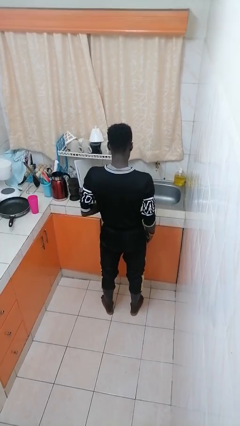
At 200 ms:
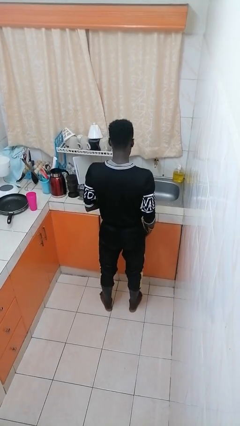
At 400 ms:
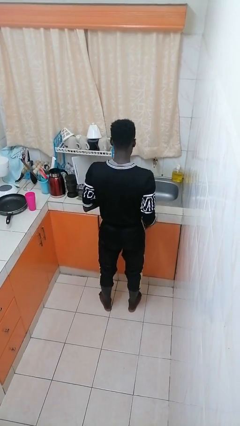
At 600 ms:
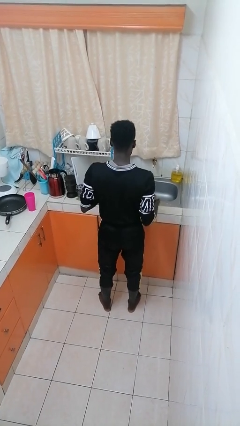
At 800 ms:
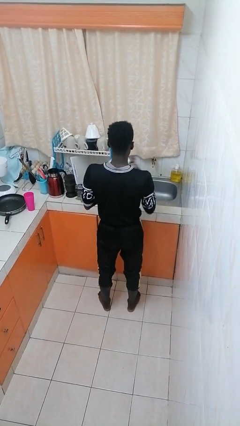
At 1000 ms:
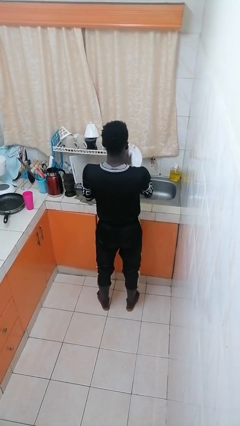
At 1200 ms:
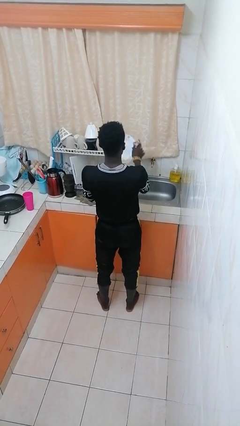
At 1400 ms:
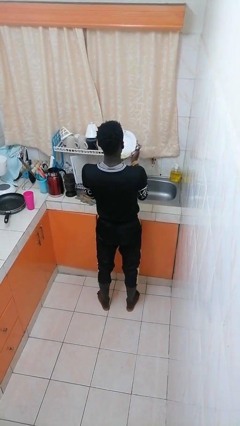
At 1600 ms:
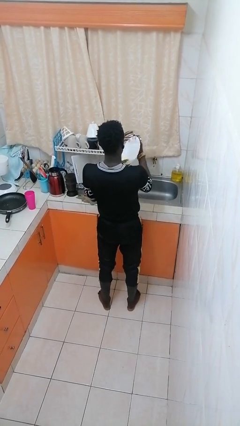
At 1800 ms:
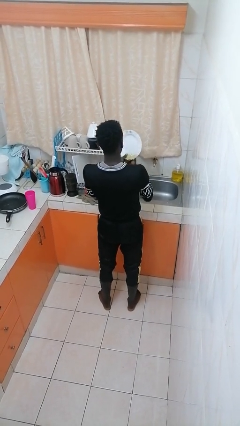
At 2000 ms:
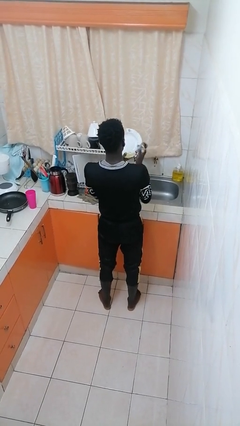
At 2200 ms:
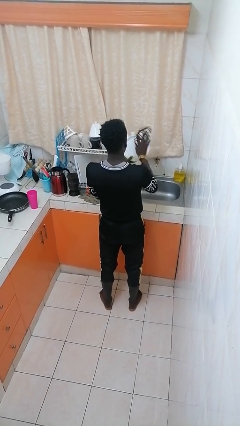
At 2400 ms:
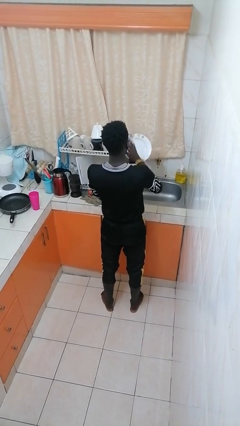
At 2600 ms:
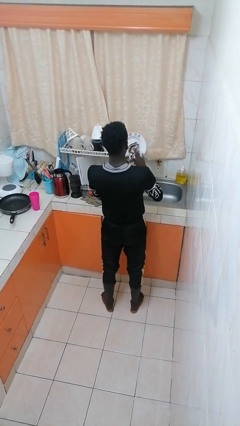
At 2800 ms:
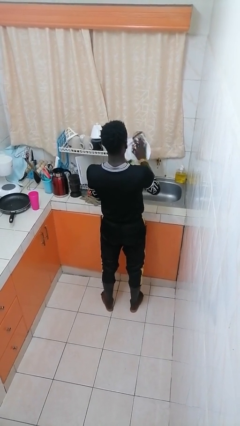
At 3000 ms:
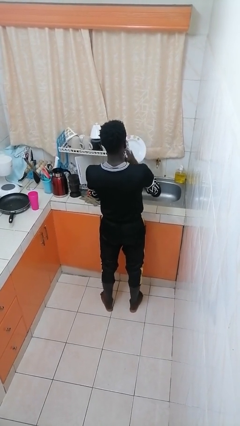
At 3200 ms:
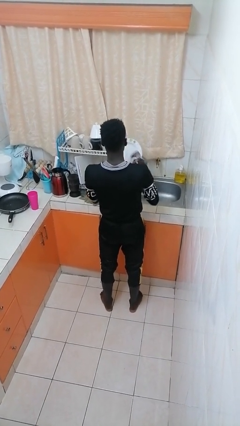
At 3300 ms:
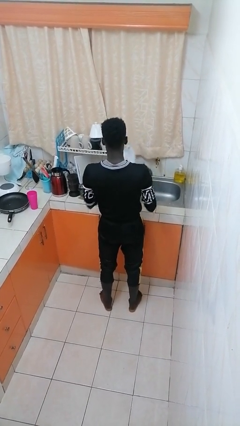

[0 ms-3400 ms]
person dries dish

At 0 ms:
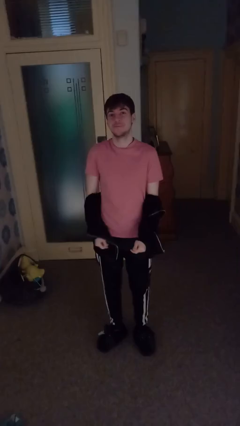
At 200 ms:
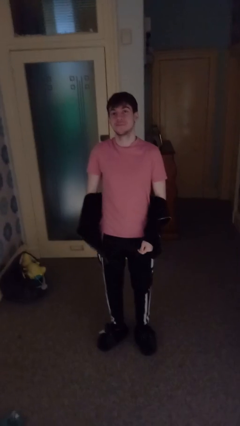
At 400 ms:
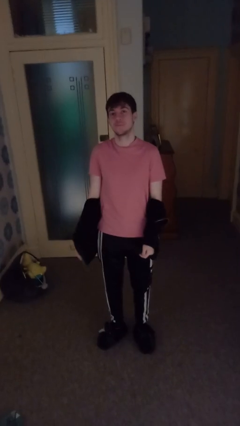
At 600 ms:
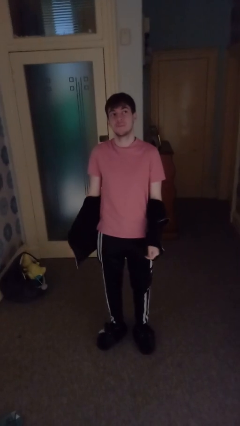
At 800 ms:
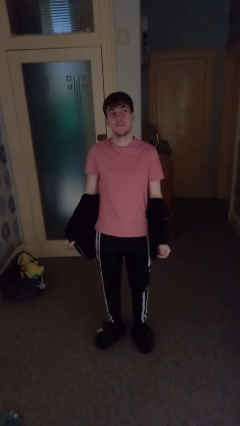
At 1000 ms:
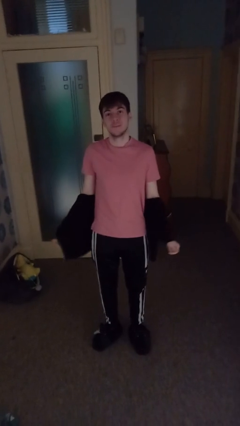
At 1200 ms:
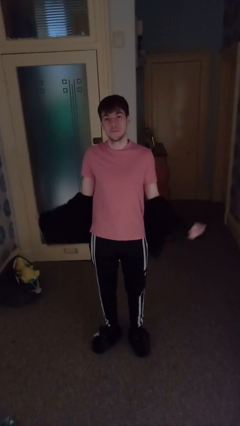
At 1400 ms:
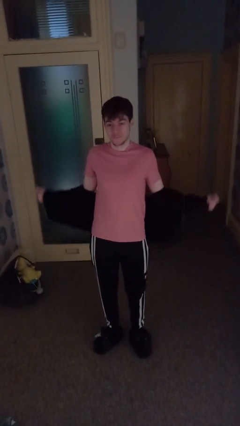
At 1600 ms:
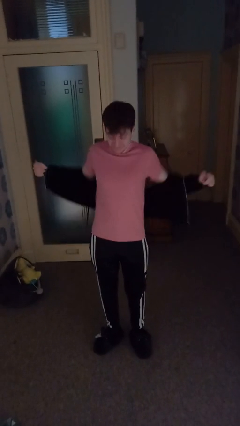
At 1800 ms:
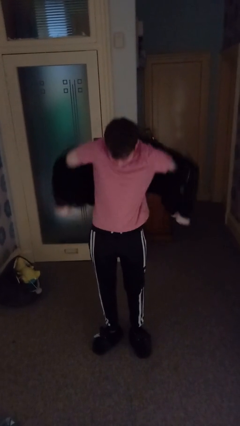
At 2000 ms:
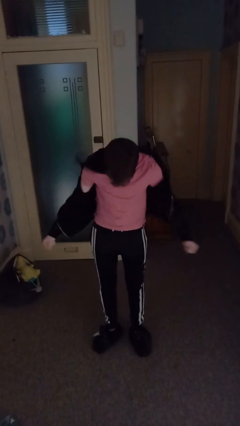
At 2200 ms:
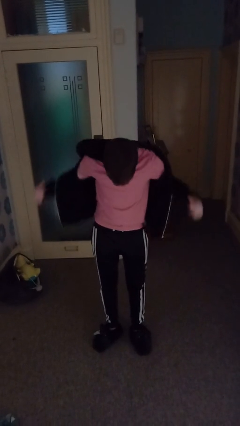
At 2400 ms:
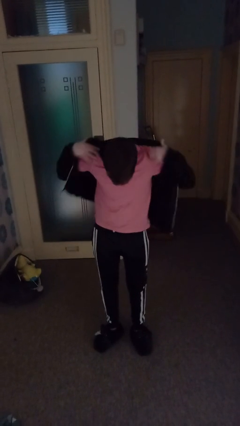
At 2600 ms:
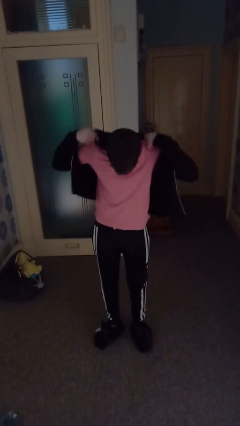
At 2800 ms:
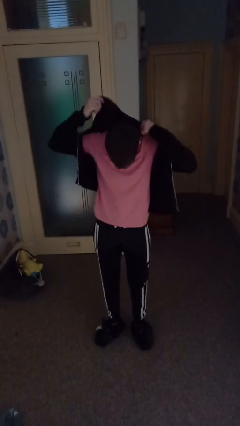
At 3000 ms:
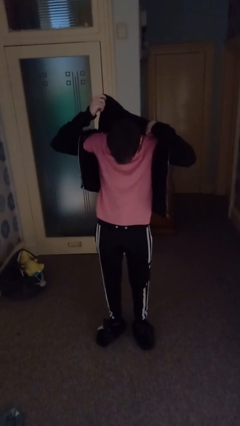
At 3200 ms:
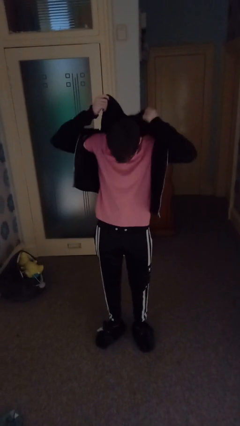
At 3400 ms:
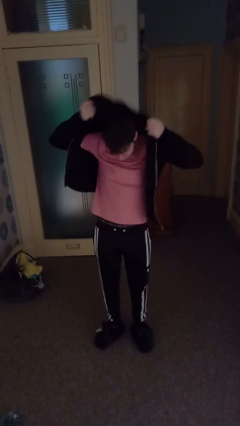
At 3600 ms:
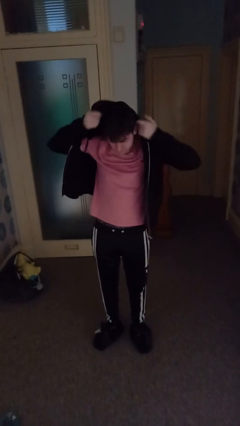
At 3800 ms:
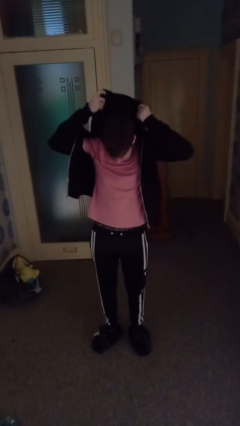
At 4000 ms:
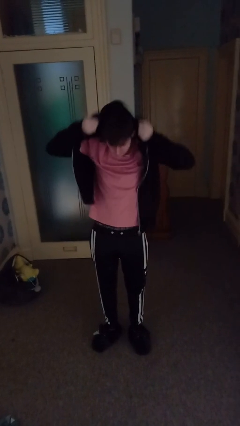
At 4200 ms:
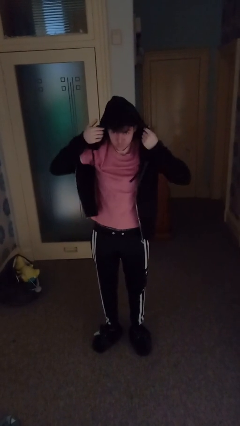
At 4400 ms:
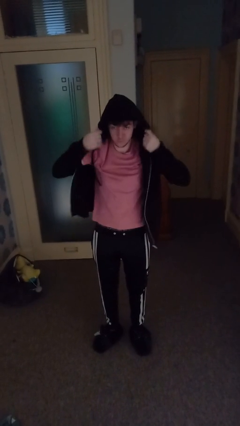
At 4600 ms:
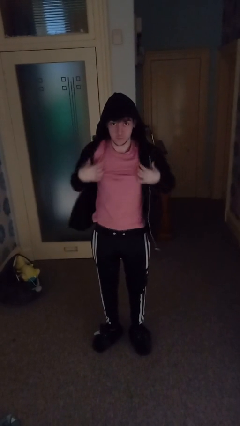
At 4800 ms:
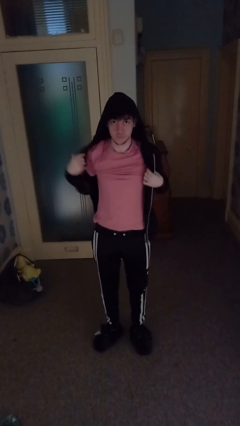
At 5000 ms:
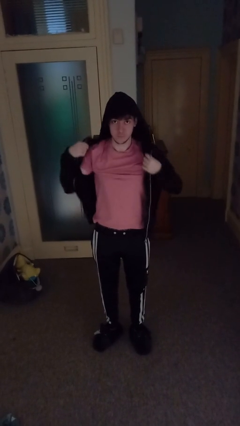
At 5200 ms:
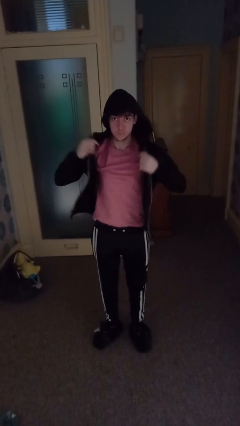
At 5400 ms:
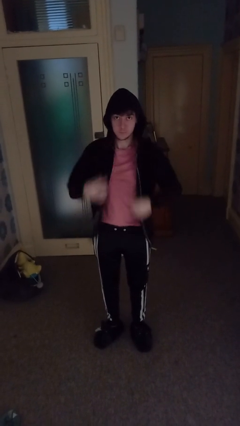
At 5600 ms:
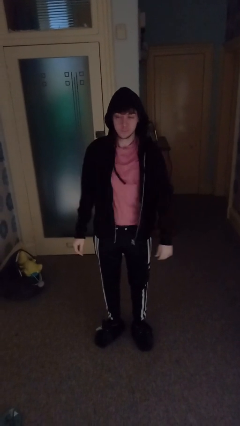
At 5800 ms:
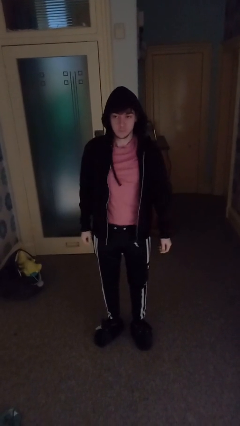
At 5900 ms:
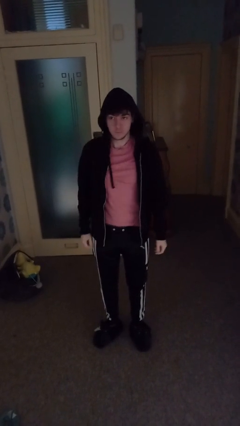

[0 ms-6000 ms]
person puts on hoodie

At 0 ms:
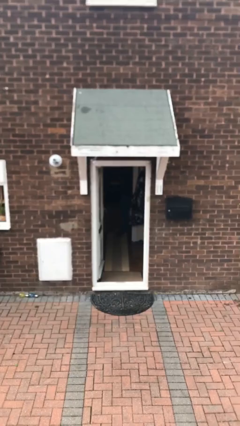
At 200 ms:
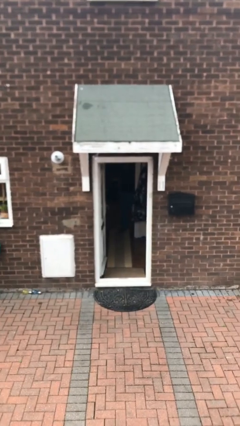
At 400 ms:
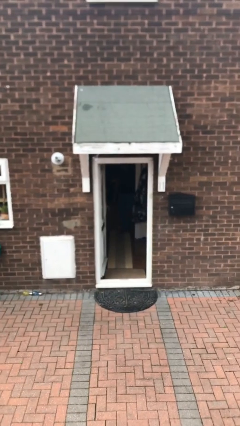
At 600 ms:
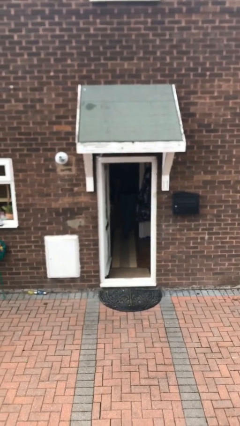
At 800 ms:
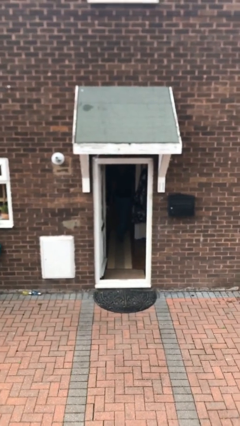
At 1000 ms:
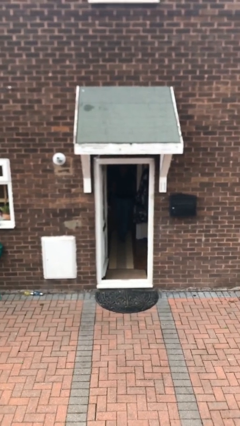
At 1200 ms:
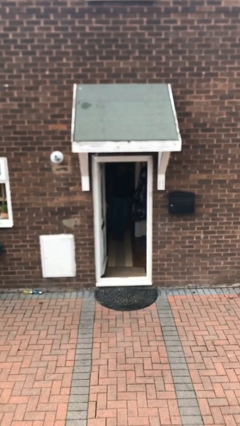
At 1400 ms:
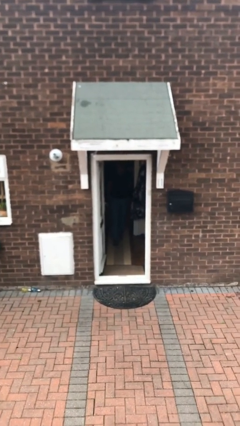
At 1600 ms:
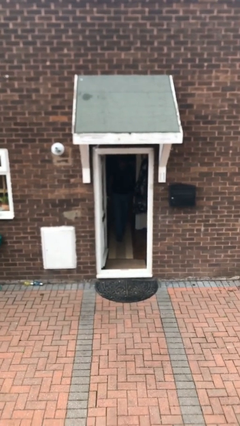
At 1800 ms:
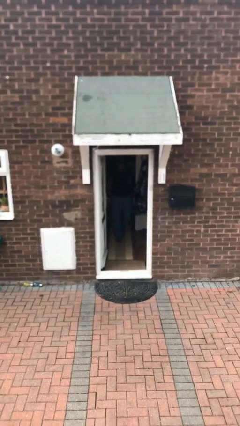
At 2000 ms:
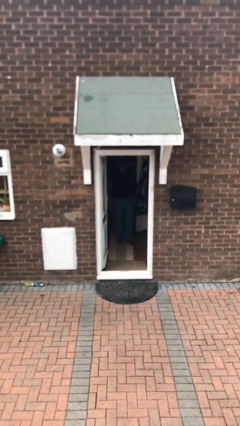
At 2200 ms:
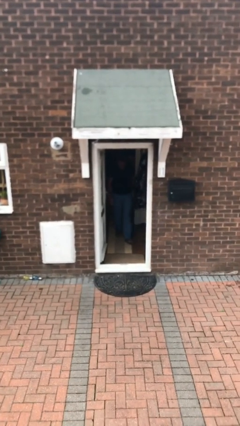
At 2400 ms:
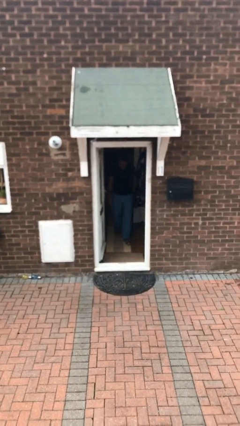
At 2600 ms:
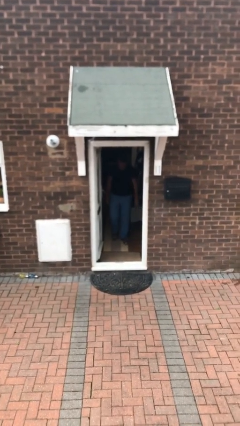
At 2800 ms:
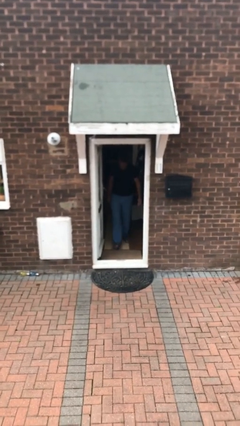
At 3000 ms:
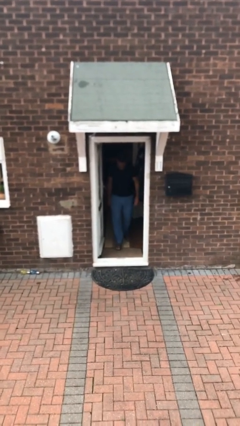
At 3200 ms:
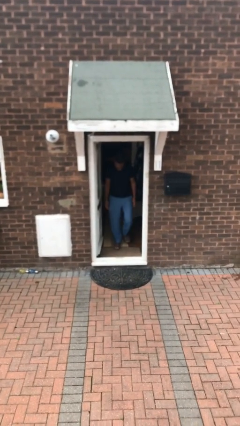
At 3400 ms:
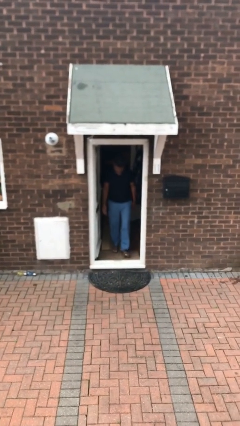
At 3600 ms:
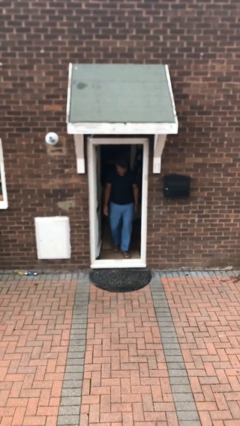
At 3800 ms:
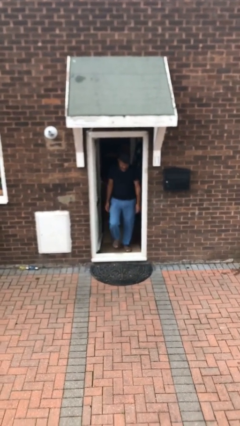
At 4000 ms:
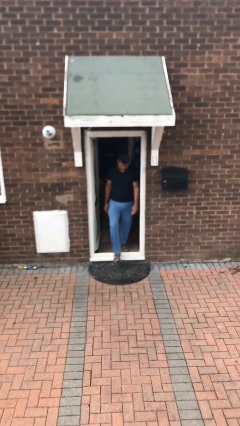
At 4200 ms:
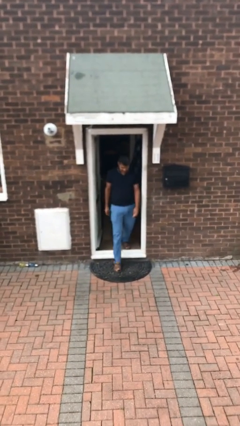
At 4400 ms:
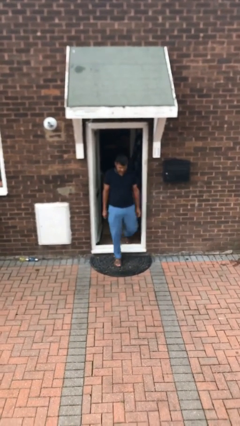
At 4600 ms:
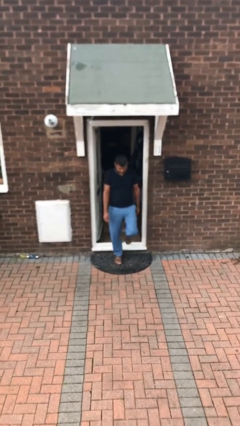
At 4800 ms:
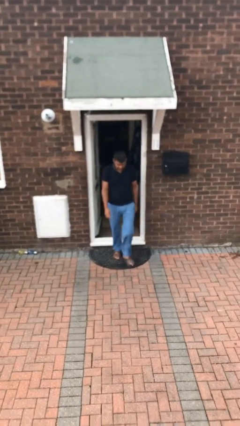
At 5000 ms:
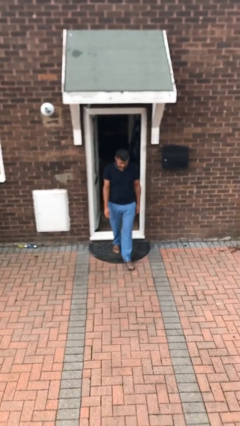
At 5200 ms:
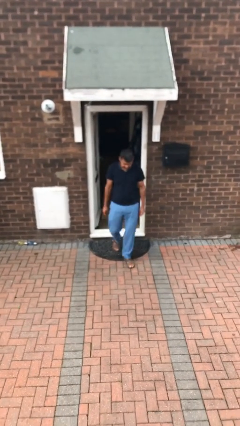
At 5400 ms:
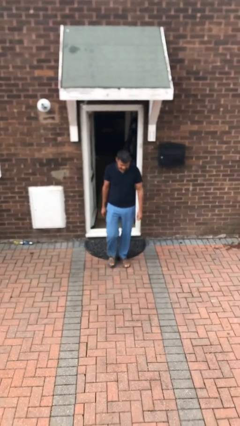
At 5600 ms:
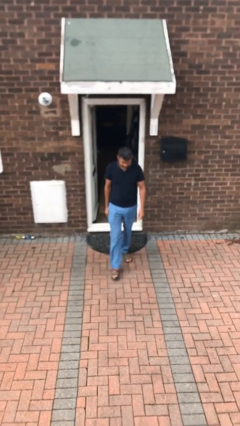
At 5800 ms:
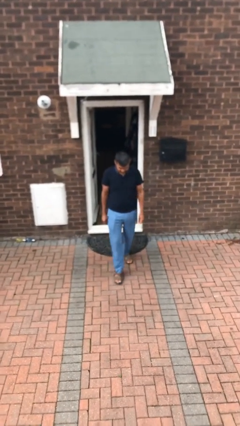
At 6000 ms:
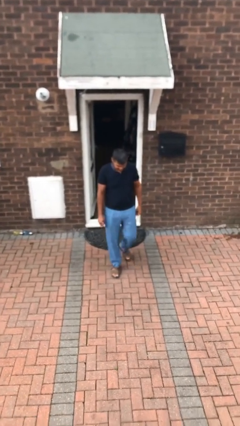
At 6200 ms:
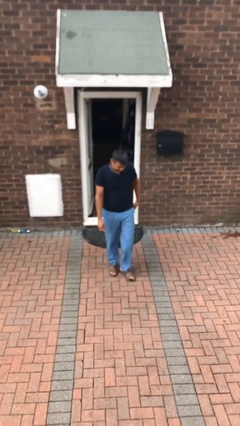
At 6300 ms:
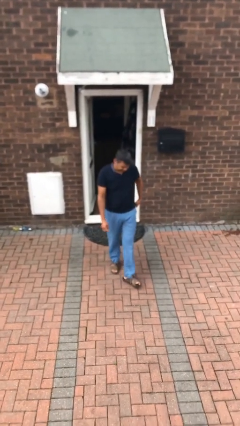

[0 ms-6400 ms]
person enters scene through structure

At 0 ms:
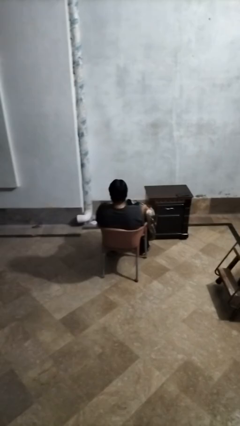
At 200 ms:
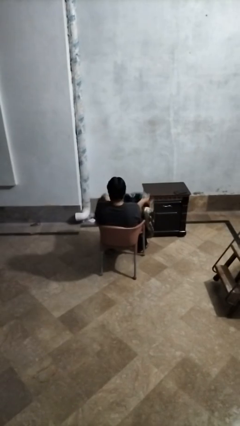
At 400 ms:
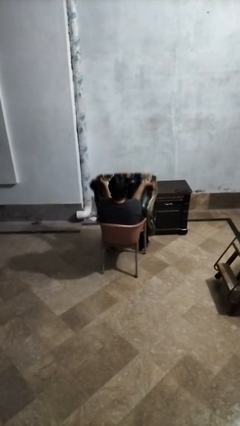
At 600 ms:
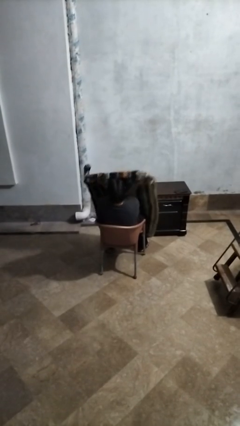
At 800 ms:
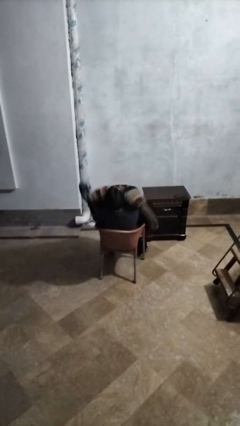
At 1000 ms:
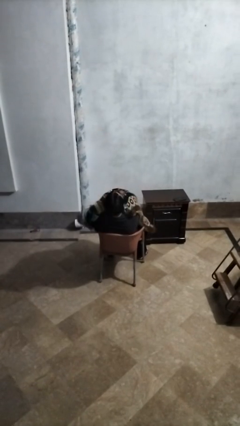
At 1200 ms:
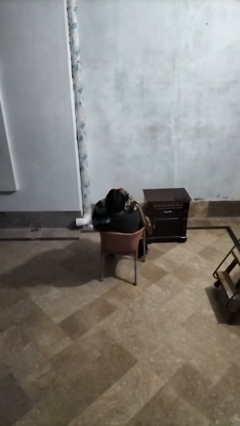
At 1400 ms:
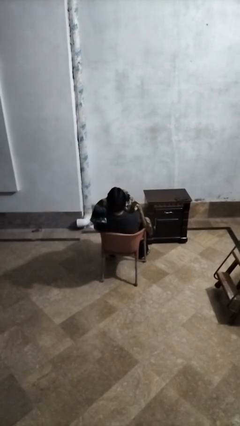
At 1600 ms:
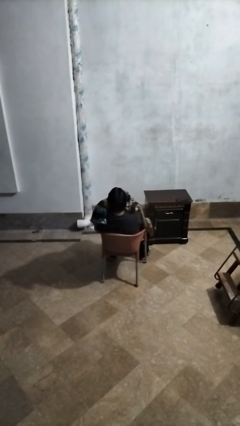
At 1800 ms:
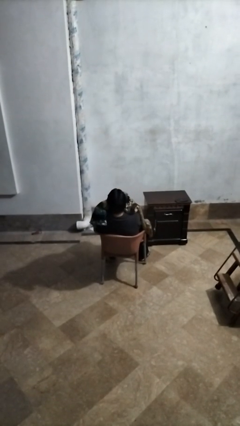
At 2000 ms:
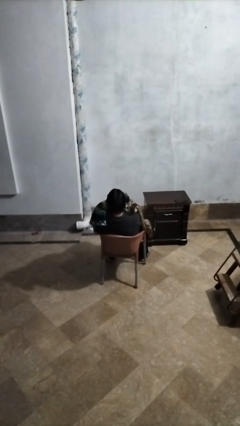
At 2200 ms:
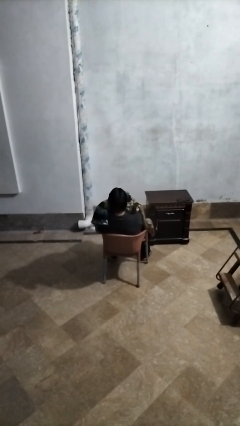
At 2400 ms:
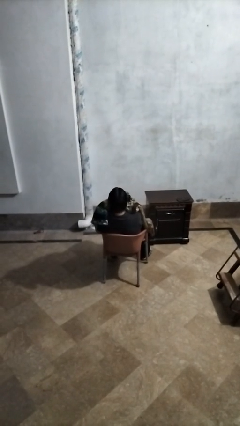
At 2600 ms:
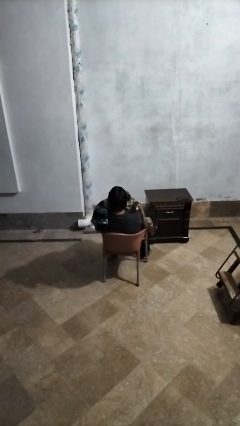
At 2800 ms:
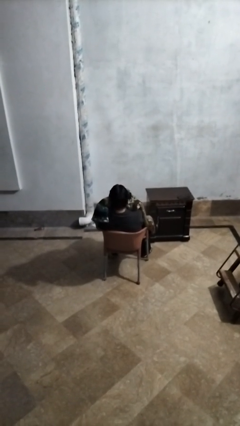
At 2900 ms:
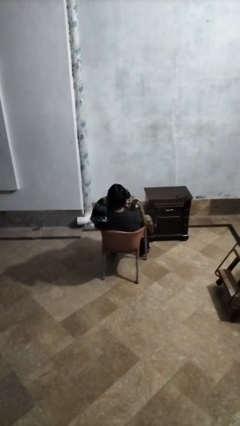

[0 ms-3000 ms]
person covers with blanket
